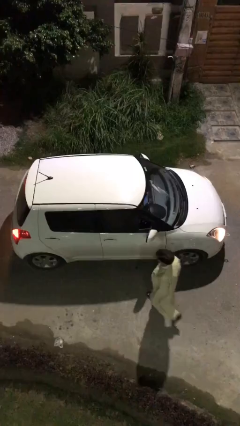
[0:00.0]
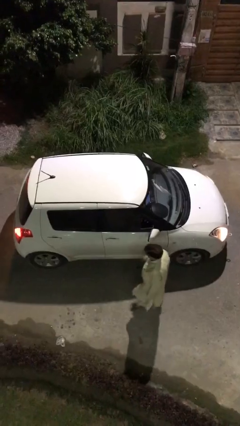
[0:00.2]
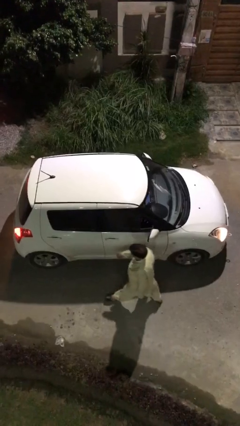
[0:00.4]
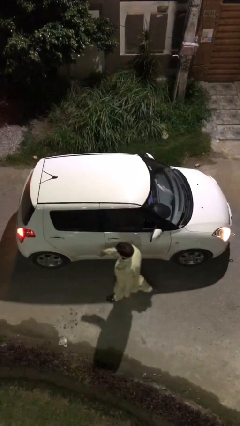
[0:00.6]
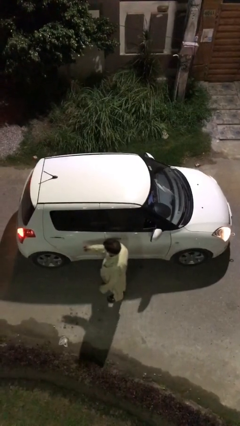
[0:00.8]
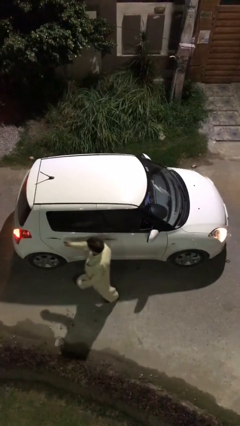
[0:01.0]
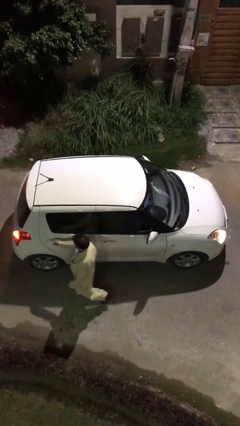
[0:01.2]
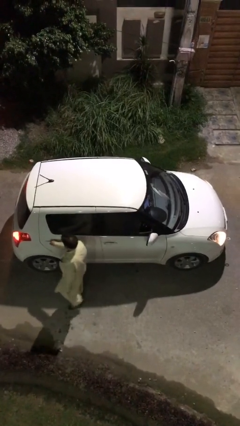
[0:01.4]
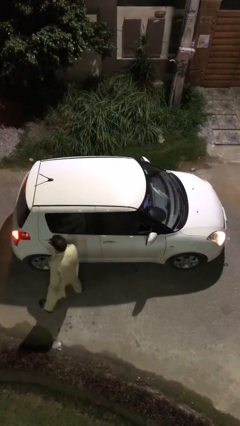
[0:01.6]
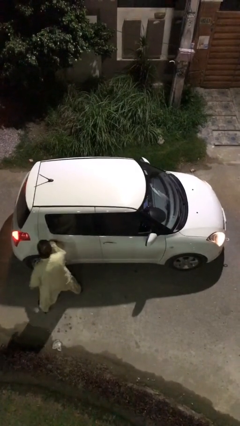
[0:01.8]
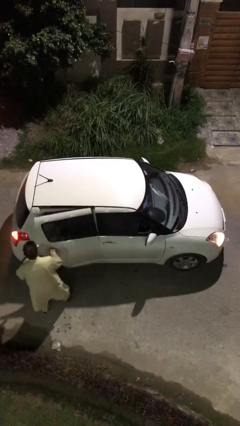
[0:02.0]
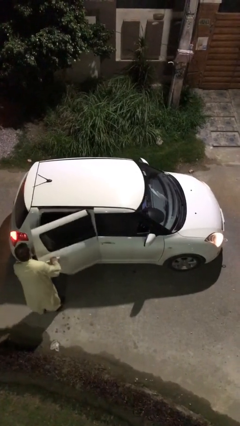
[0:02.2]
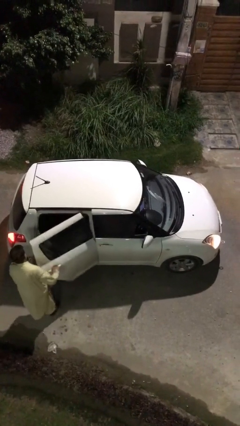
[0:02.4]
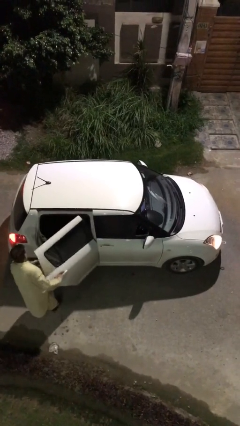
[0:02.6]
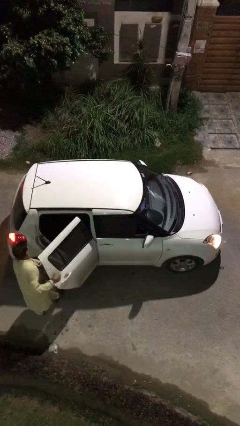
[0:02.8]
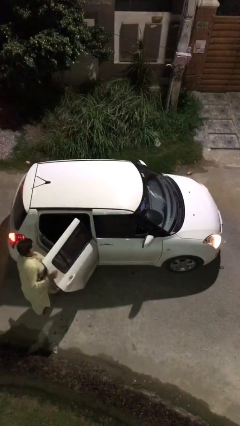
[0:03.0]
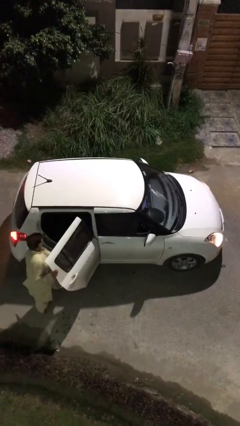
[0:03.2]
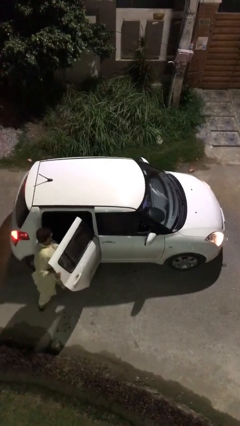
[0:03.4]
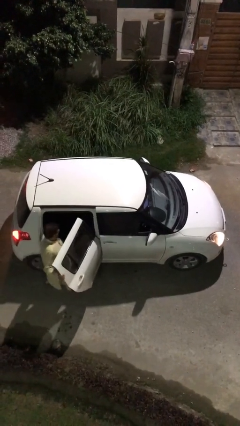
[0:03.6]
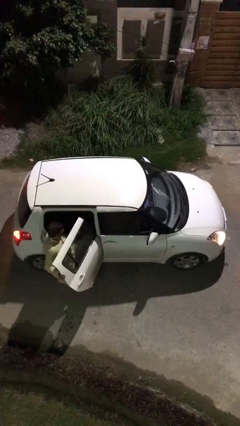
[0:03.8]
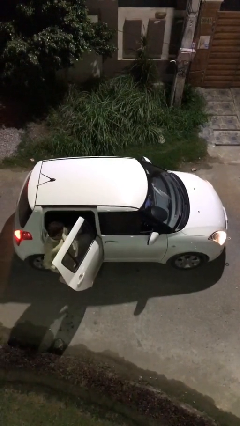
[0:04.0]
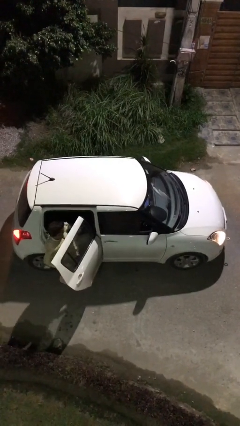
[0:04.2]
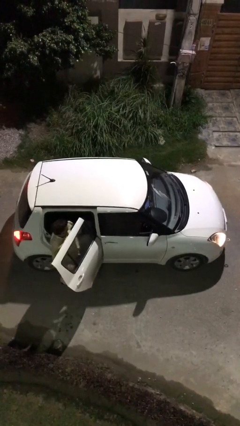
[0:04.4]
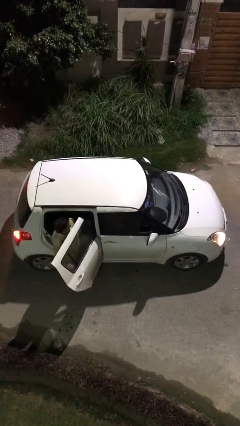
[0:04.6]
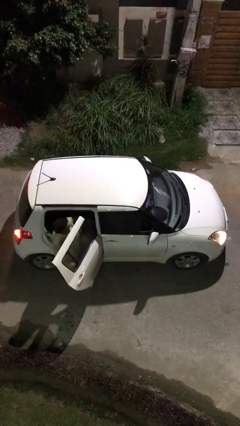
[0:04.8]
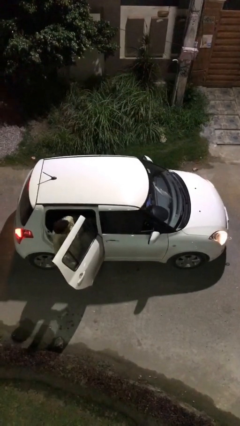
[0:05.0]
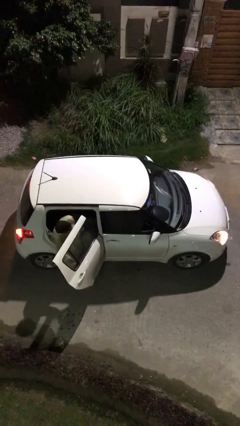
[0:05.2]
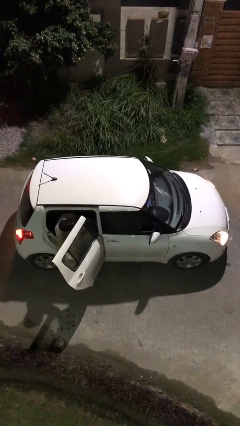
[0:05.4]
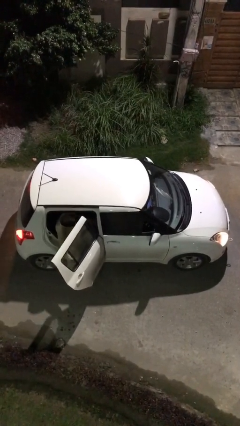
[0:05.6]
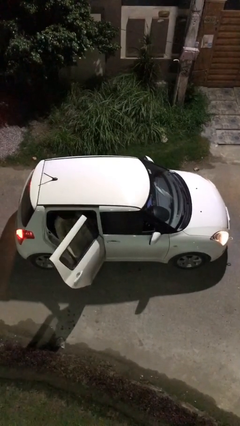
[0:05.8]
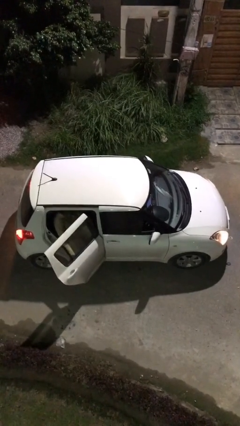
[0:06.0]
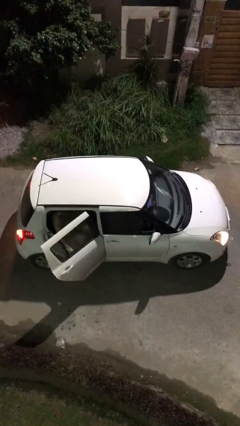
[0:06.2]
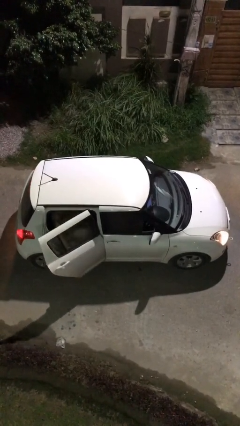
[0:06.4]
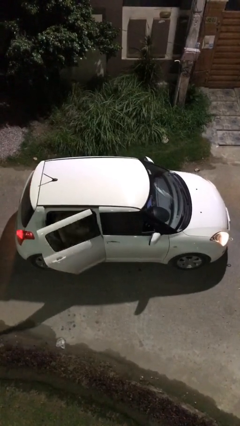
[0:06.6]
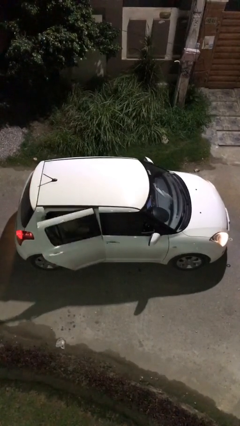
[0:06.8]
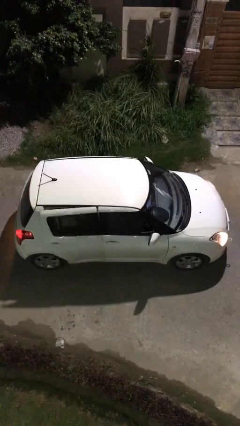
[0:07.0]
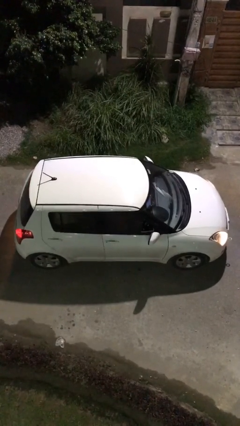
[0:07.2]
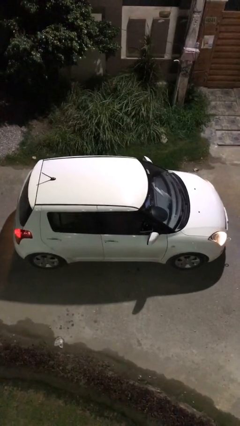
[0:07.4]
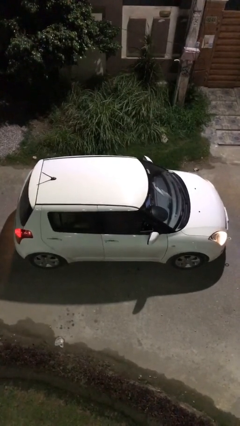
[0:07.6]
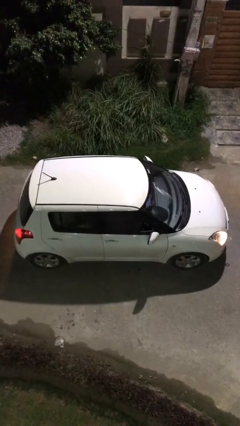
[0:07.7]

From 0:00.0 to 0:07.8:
car picks up person

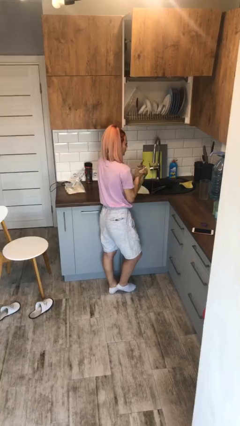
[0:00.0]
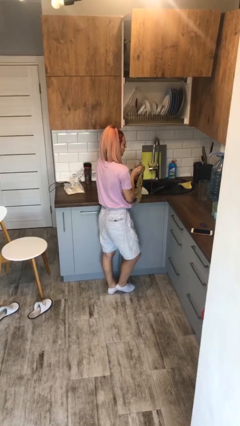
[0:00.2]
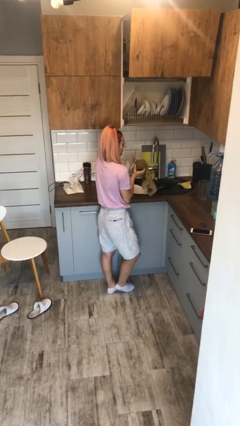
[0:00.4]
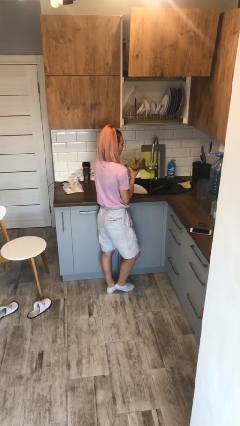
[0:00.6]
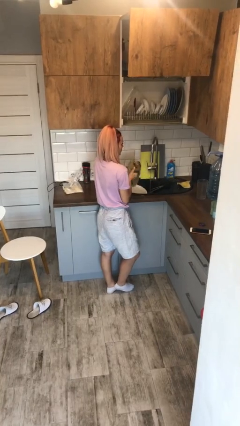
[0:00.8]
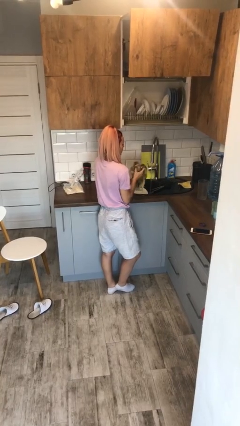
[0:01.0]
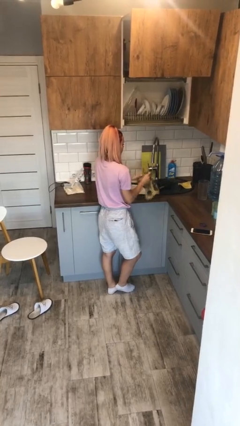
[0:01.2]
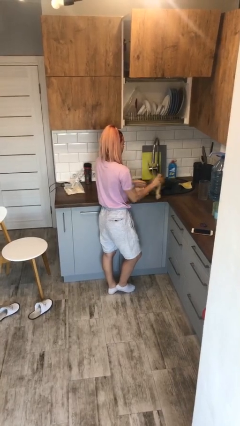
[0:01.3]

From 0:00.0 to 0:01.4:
person dries hands with towel

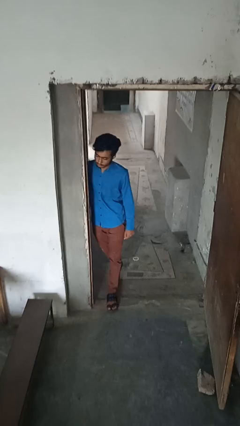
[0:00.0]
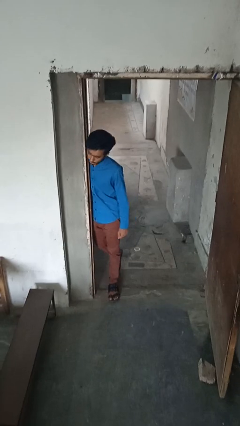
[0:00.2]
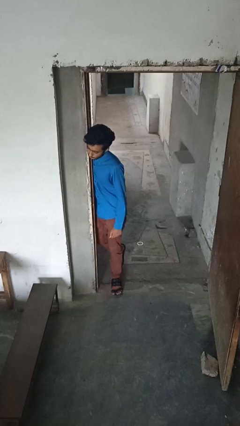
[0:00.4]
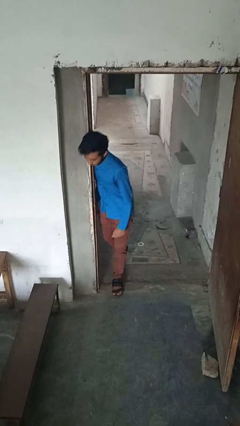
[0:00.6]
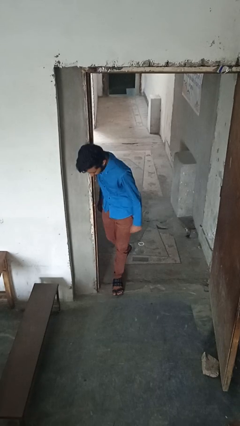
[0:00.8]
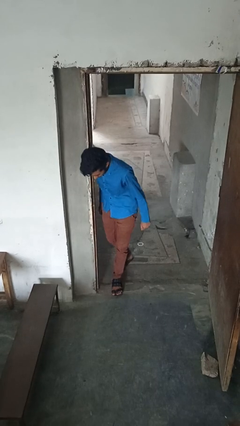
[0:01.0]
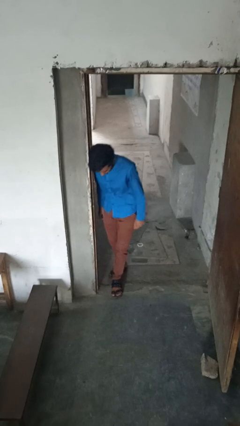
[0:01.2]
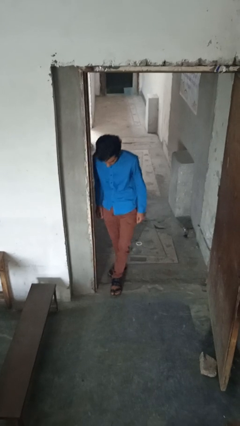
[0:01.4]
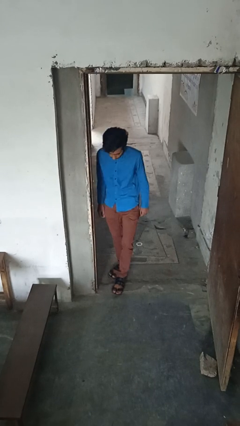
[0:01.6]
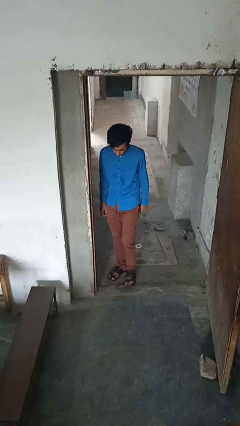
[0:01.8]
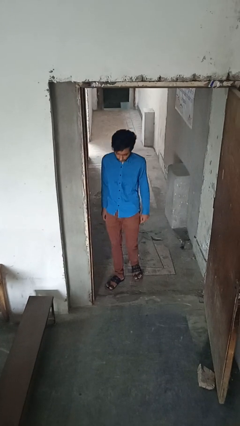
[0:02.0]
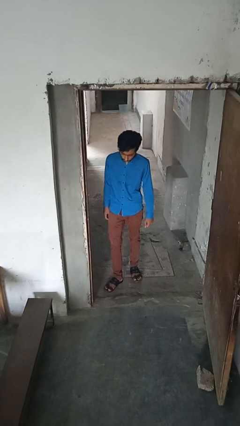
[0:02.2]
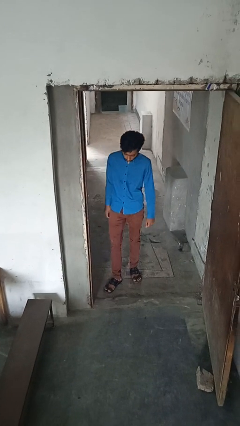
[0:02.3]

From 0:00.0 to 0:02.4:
person bumps into wall

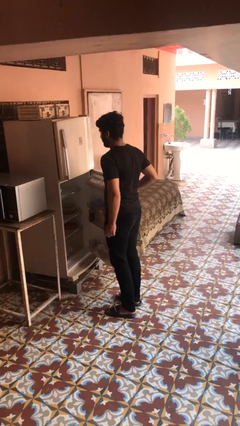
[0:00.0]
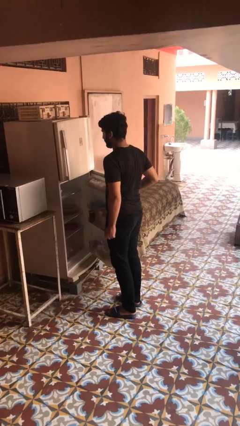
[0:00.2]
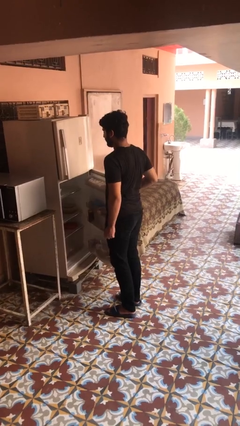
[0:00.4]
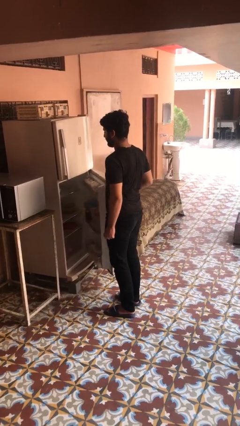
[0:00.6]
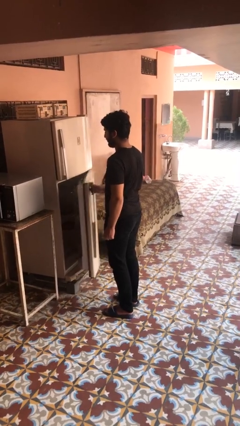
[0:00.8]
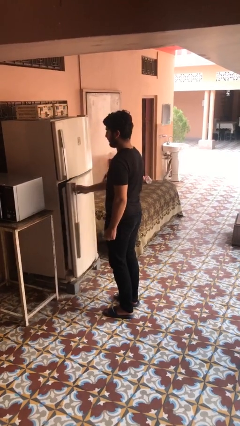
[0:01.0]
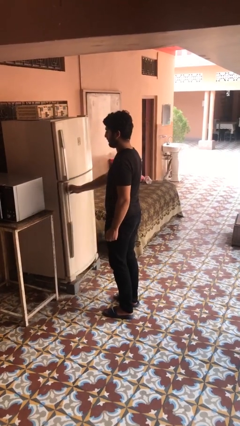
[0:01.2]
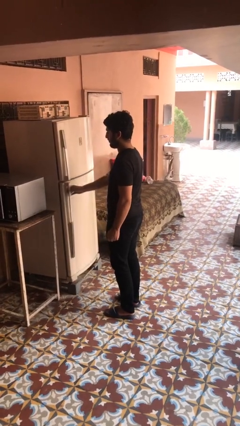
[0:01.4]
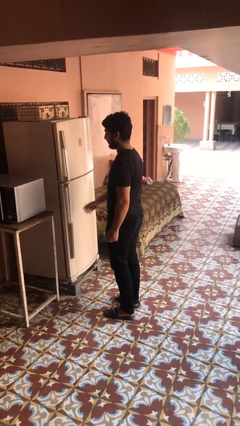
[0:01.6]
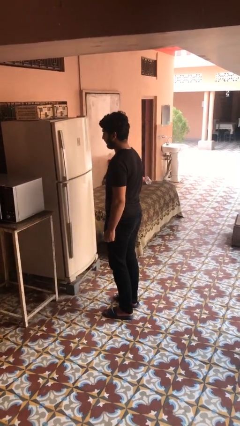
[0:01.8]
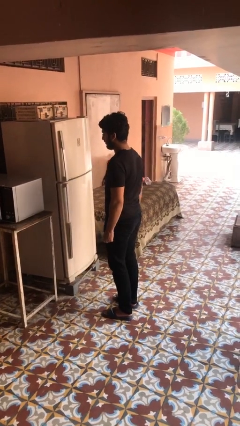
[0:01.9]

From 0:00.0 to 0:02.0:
person closes refrigerator

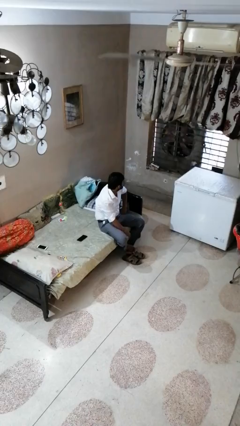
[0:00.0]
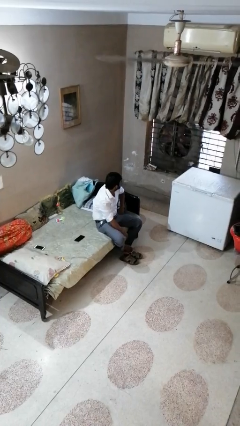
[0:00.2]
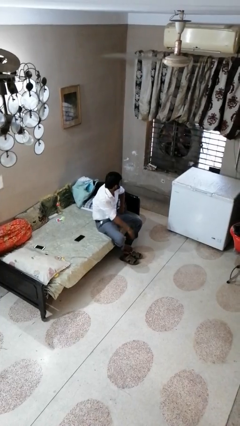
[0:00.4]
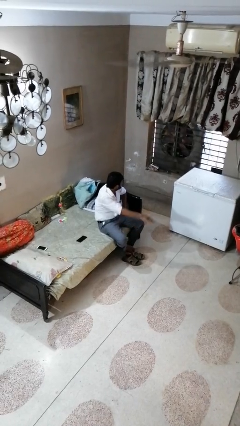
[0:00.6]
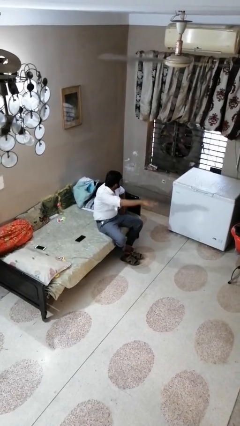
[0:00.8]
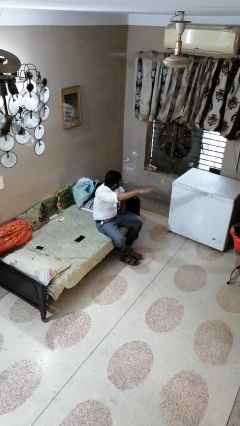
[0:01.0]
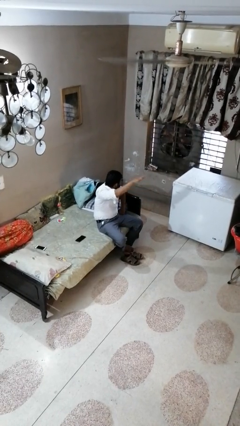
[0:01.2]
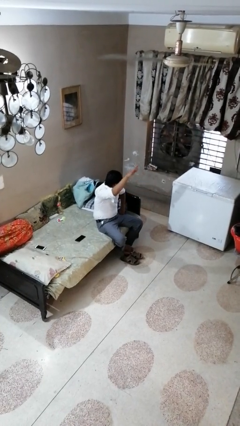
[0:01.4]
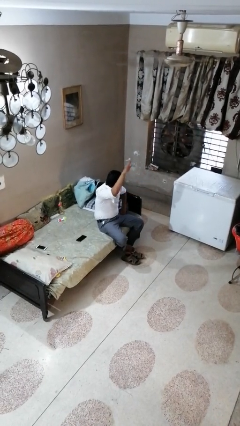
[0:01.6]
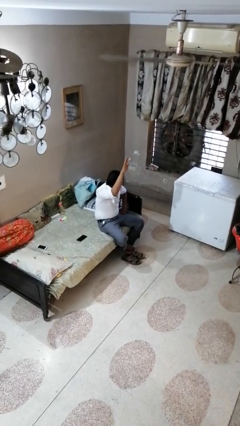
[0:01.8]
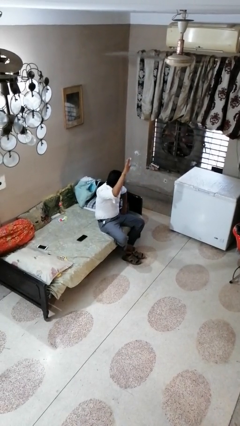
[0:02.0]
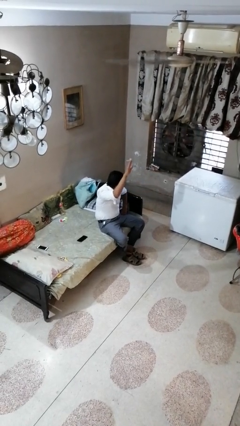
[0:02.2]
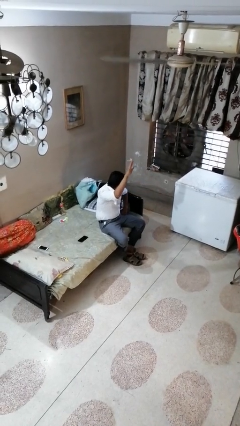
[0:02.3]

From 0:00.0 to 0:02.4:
person gestures swipe up

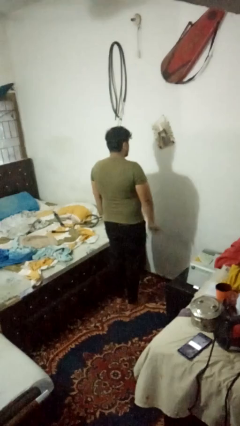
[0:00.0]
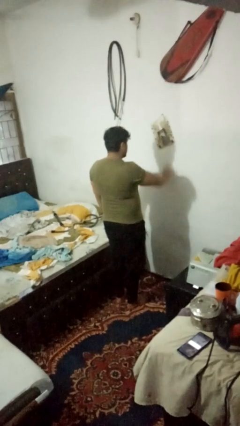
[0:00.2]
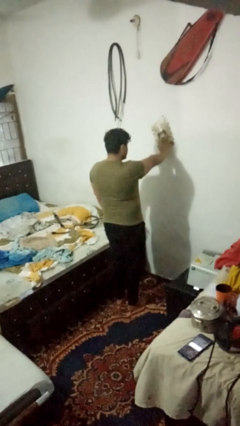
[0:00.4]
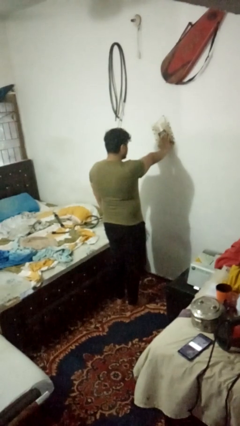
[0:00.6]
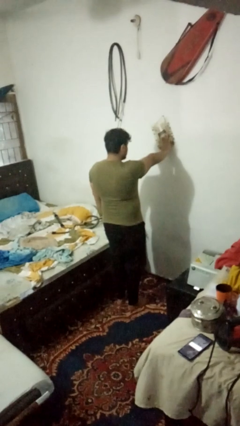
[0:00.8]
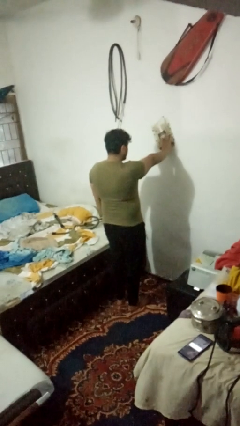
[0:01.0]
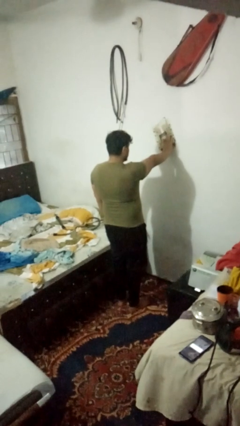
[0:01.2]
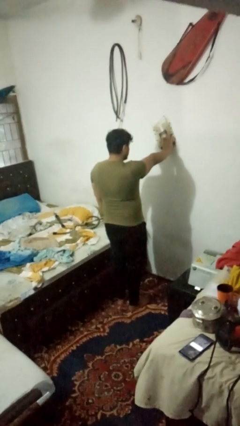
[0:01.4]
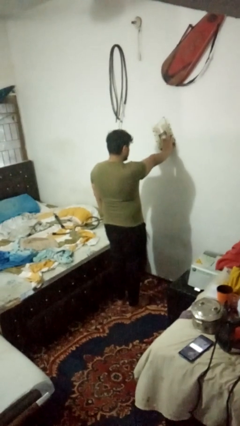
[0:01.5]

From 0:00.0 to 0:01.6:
person gestures stop
